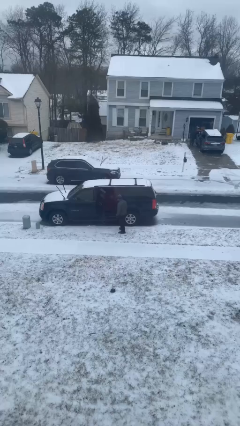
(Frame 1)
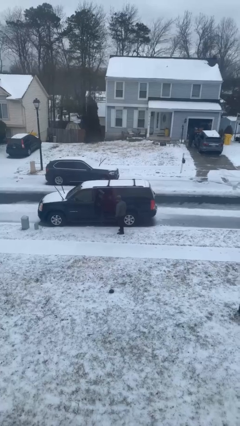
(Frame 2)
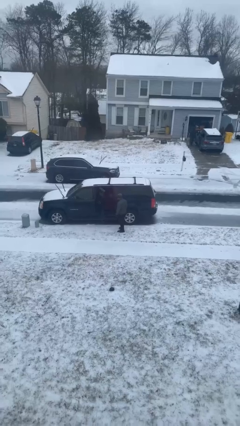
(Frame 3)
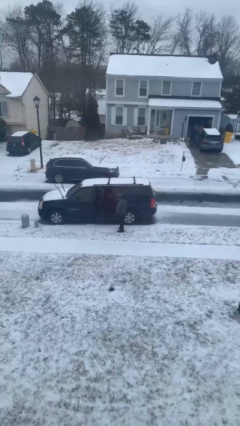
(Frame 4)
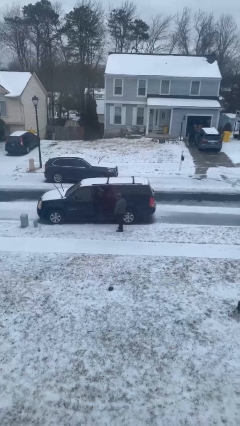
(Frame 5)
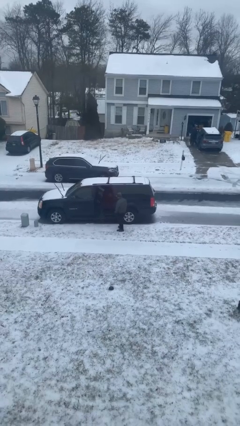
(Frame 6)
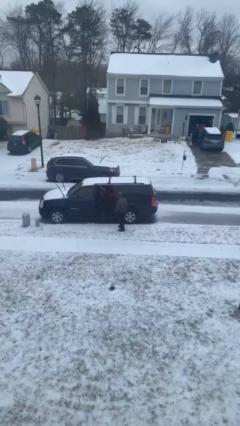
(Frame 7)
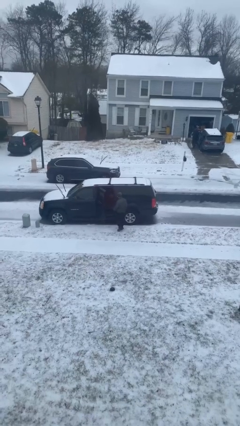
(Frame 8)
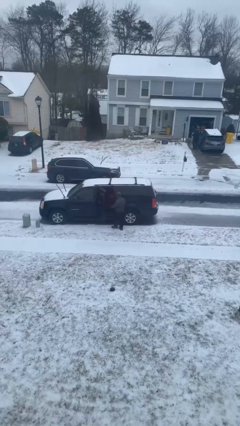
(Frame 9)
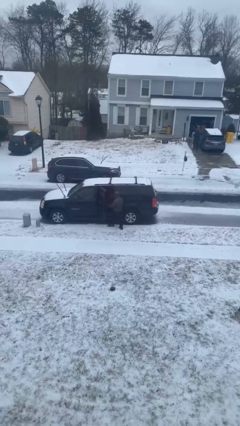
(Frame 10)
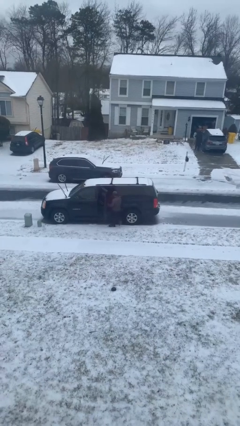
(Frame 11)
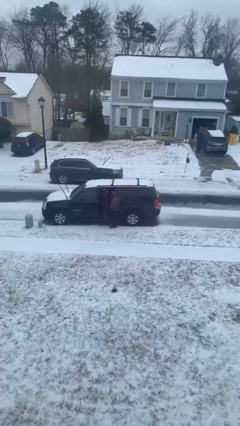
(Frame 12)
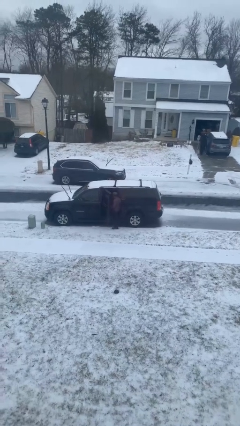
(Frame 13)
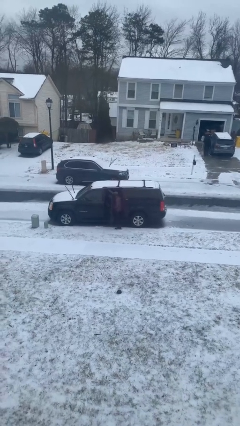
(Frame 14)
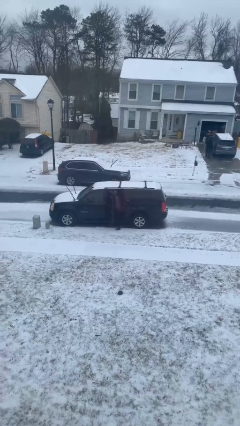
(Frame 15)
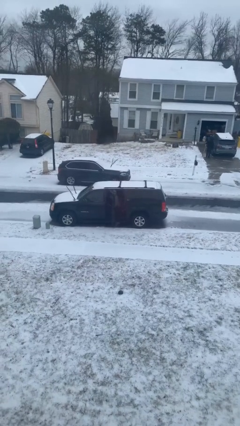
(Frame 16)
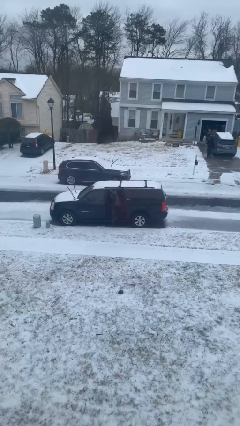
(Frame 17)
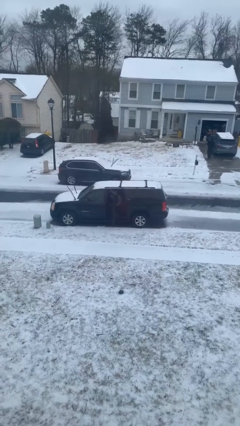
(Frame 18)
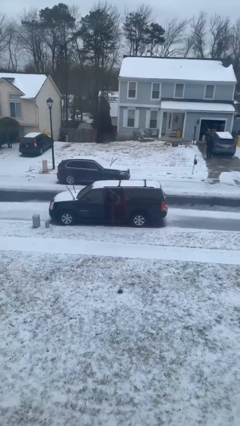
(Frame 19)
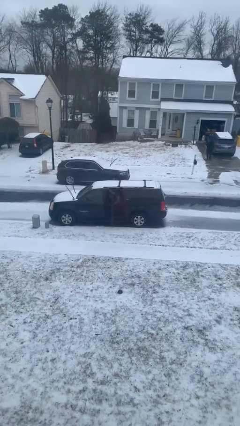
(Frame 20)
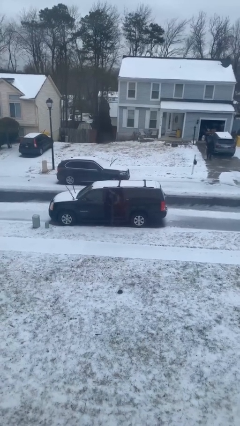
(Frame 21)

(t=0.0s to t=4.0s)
person enters car

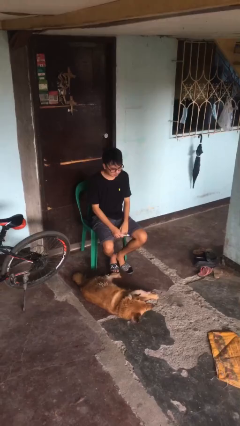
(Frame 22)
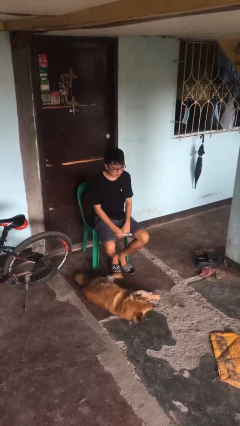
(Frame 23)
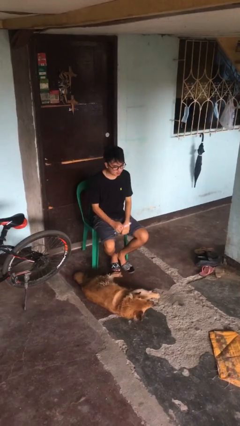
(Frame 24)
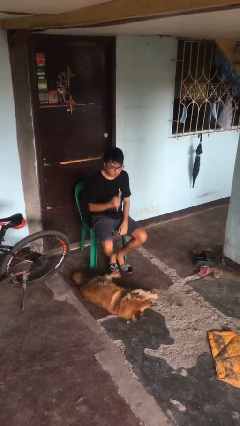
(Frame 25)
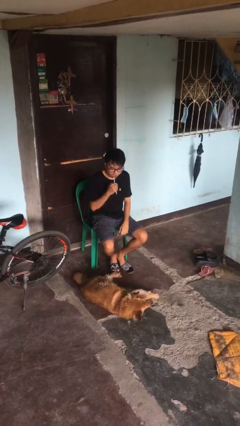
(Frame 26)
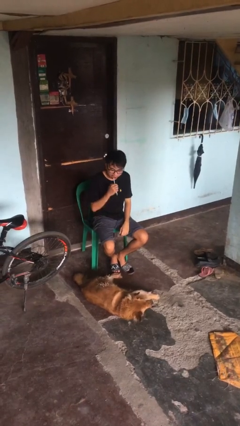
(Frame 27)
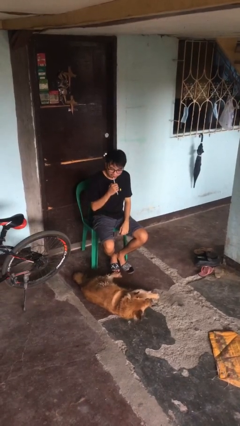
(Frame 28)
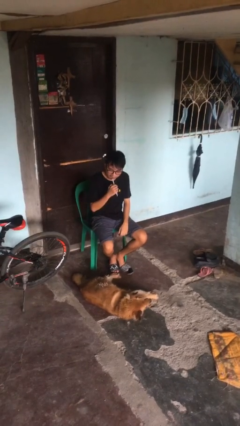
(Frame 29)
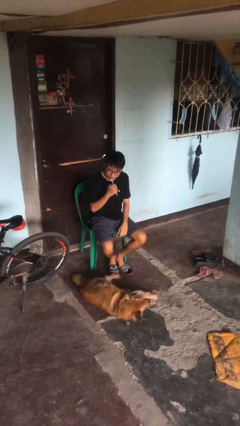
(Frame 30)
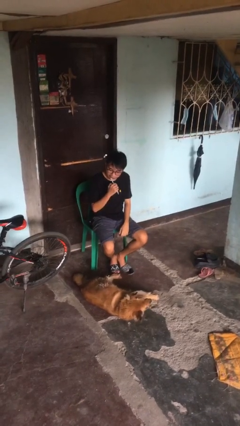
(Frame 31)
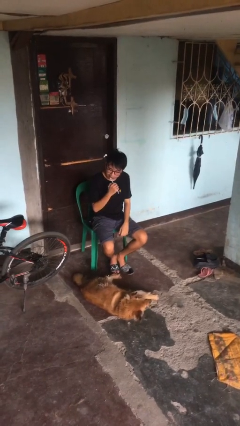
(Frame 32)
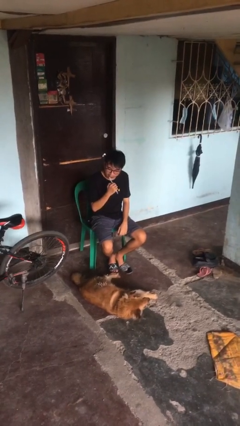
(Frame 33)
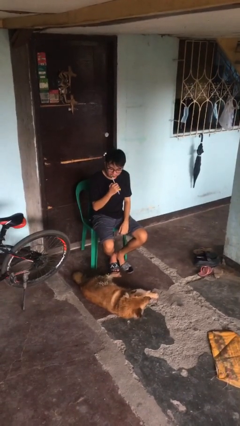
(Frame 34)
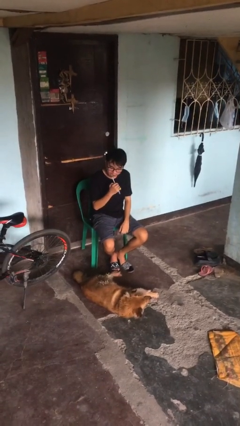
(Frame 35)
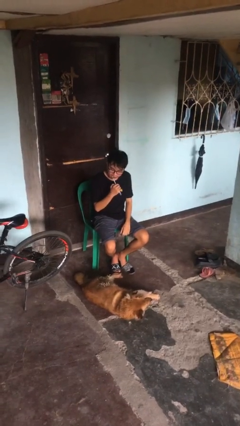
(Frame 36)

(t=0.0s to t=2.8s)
person brushes teeth

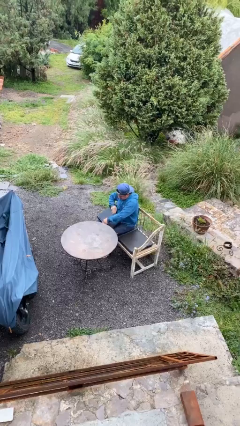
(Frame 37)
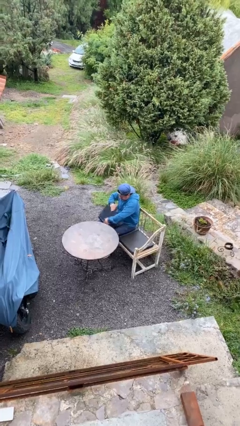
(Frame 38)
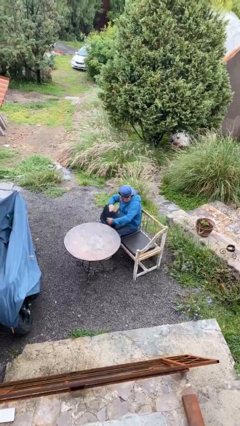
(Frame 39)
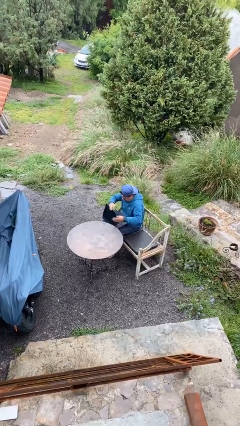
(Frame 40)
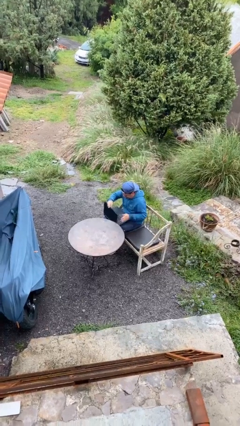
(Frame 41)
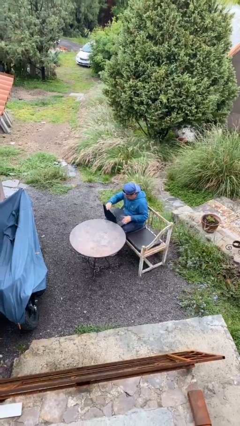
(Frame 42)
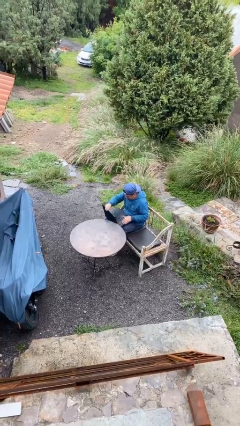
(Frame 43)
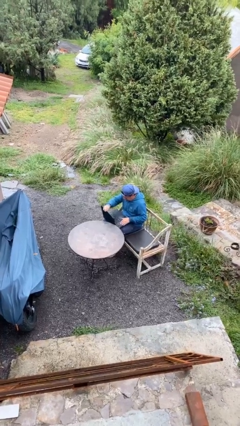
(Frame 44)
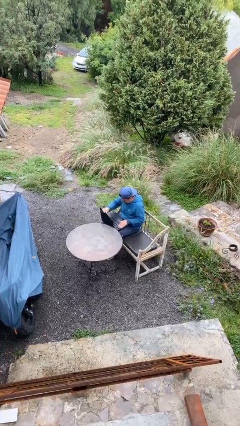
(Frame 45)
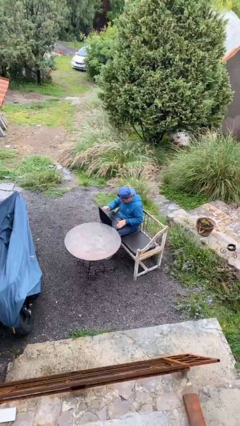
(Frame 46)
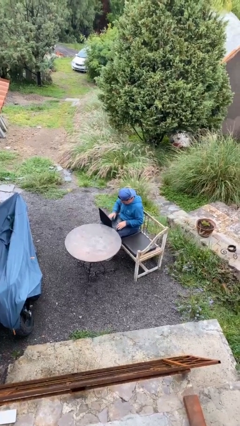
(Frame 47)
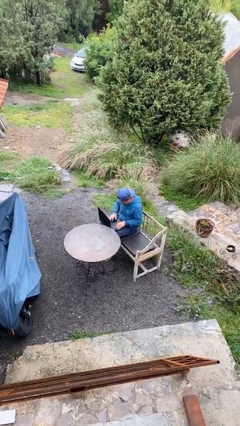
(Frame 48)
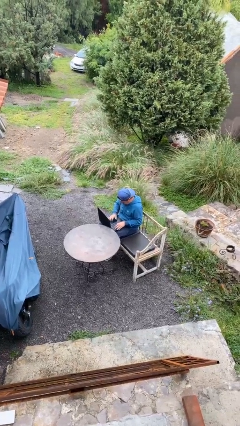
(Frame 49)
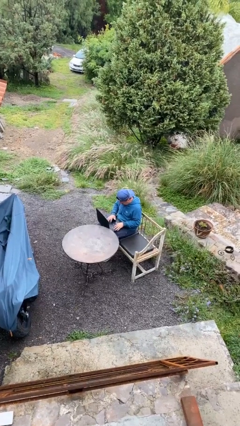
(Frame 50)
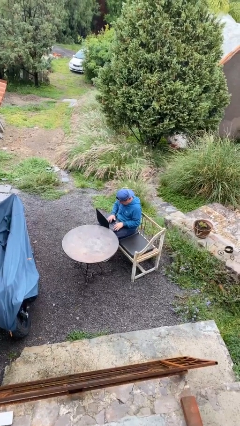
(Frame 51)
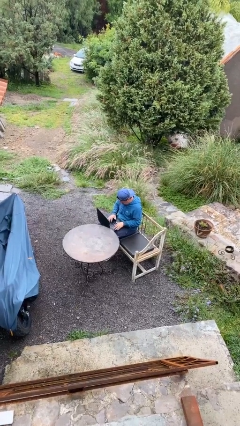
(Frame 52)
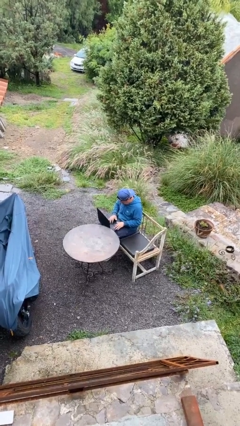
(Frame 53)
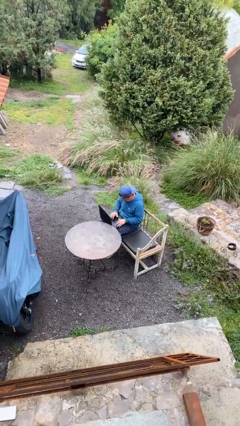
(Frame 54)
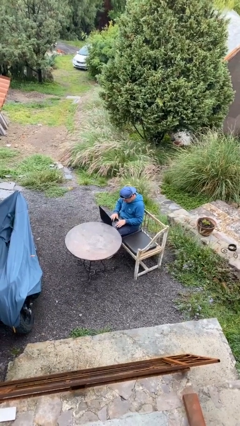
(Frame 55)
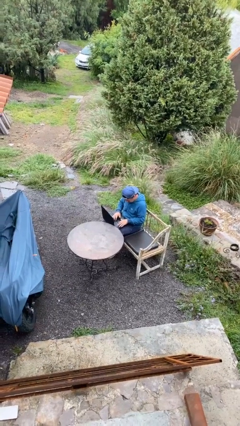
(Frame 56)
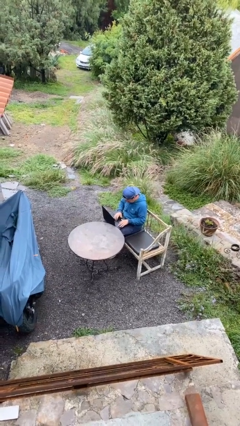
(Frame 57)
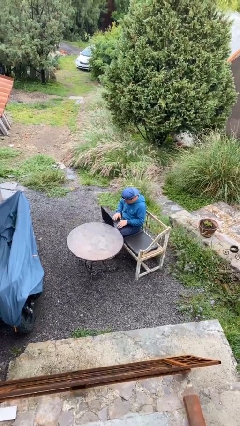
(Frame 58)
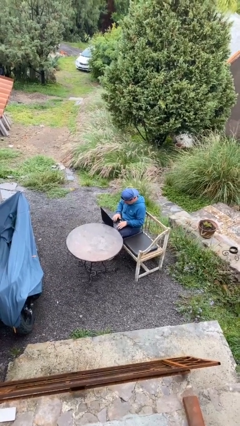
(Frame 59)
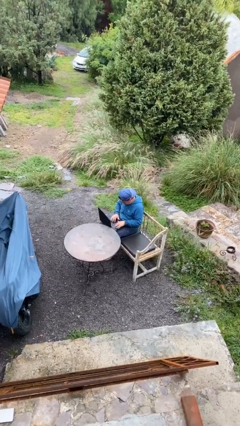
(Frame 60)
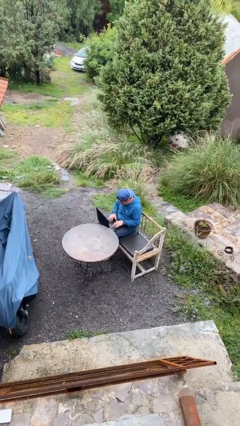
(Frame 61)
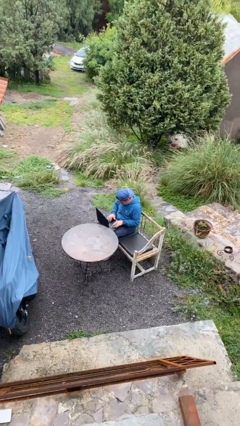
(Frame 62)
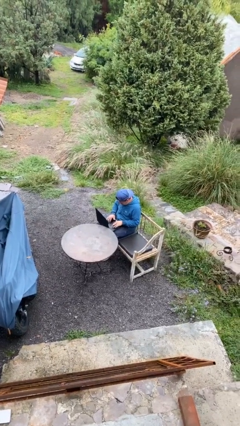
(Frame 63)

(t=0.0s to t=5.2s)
person interacts with laptop

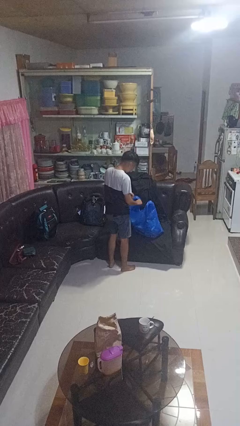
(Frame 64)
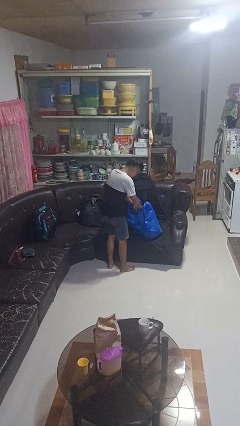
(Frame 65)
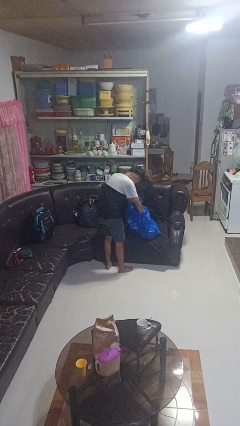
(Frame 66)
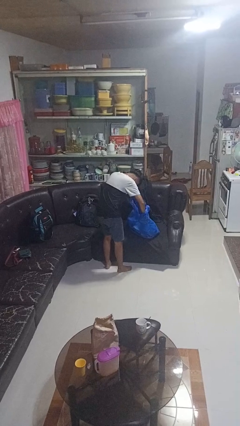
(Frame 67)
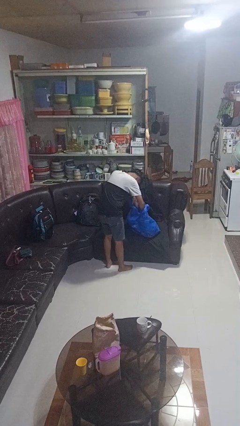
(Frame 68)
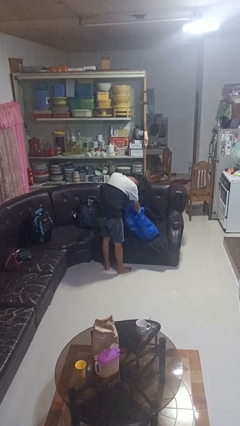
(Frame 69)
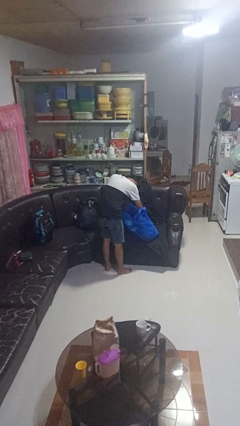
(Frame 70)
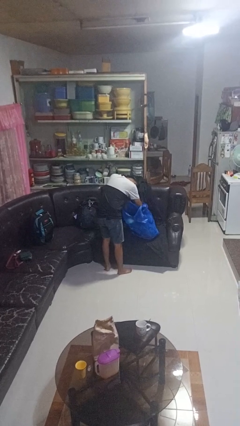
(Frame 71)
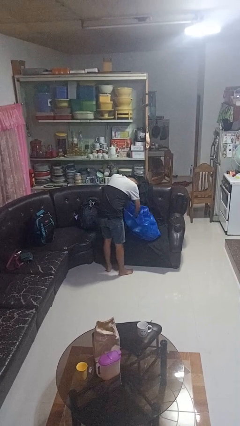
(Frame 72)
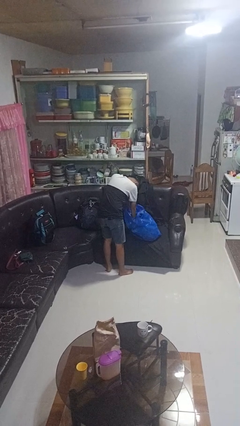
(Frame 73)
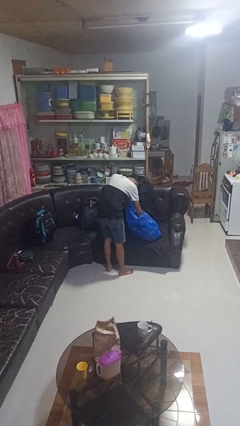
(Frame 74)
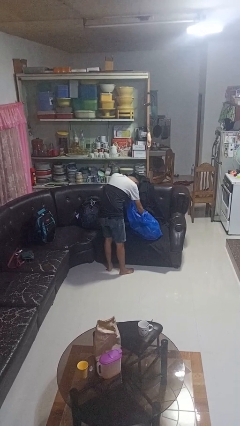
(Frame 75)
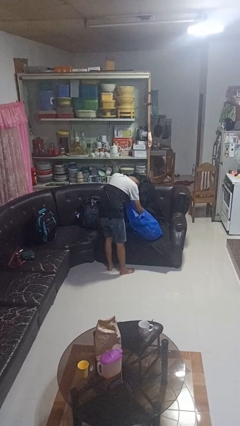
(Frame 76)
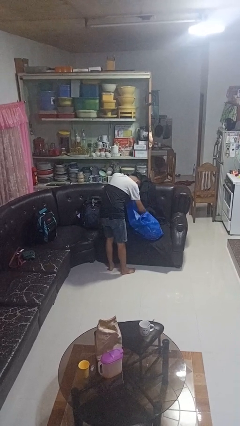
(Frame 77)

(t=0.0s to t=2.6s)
person searches in bag

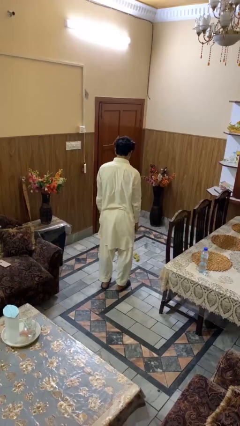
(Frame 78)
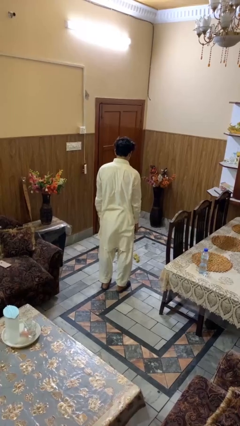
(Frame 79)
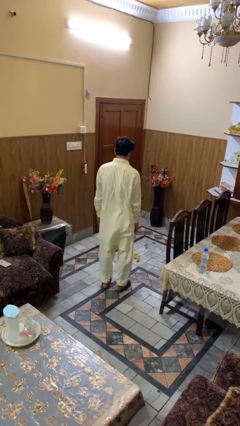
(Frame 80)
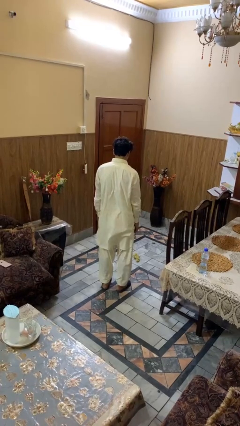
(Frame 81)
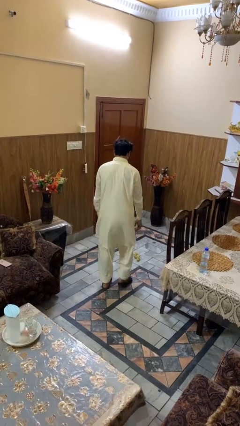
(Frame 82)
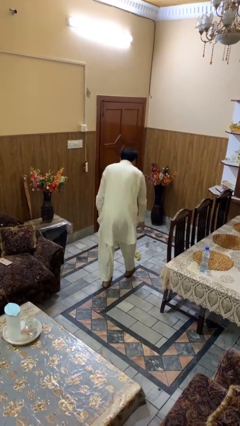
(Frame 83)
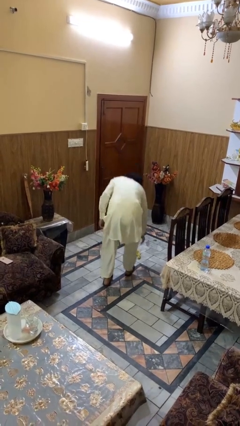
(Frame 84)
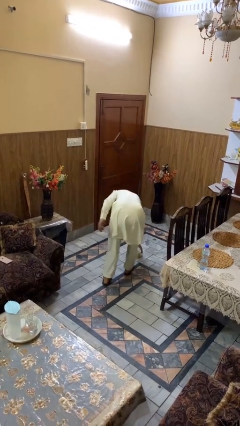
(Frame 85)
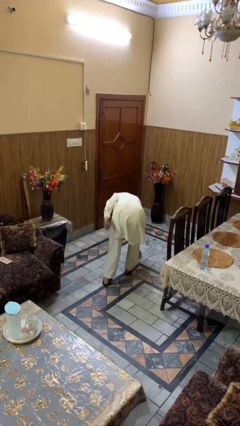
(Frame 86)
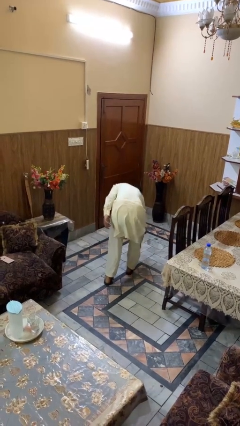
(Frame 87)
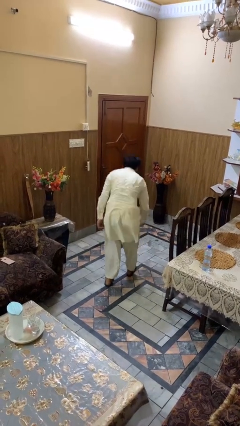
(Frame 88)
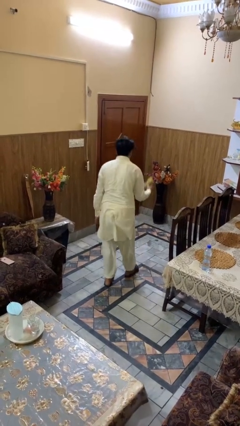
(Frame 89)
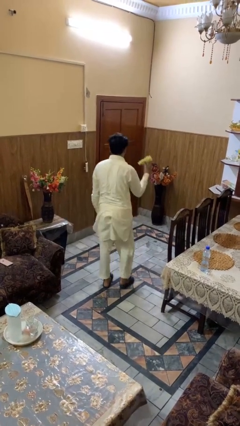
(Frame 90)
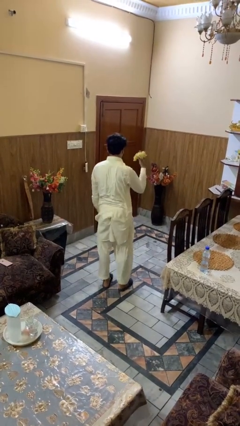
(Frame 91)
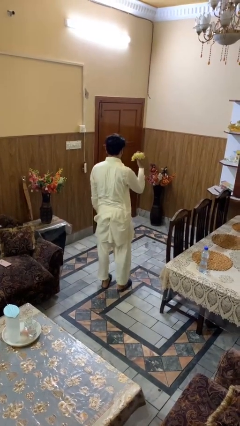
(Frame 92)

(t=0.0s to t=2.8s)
person picks up object from floor

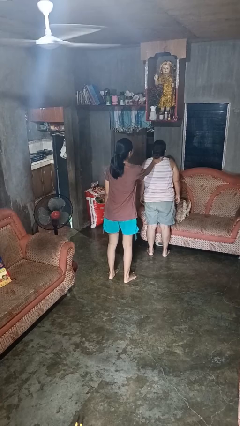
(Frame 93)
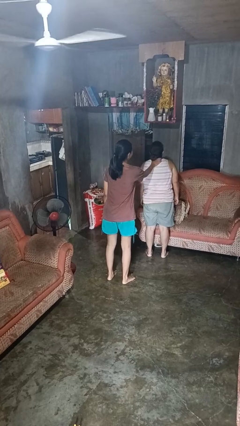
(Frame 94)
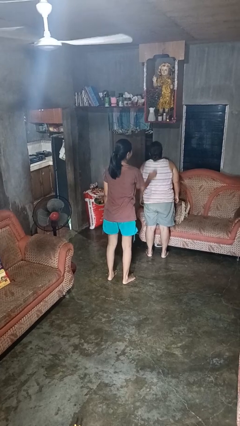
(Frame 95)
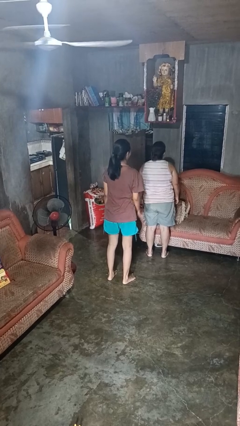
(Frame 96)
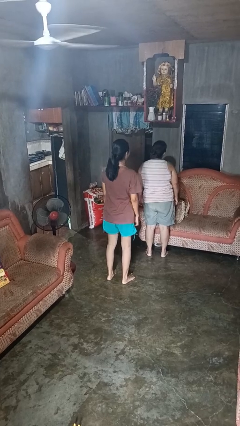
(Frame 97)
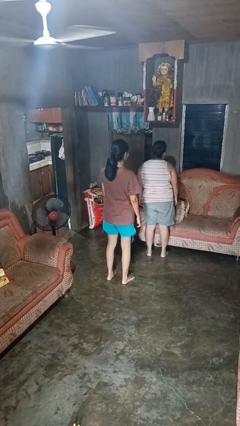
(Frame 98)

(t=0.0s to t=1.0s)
person tickles person
